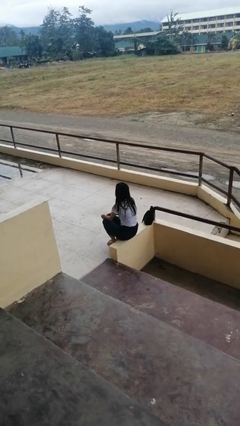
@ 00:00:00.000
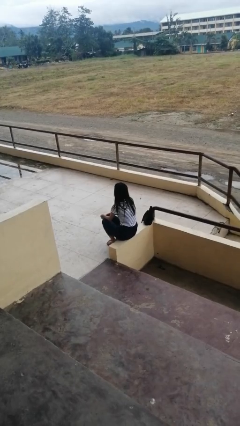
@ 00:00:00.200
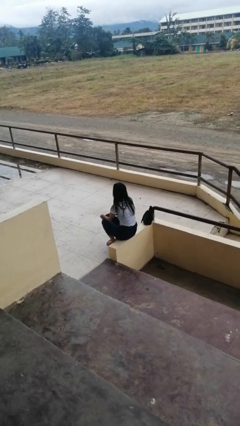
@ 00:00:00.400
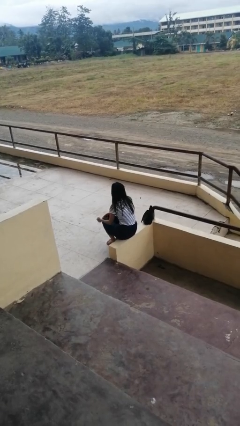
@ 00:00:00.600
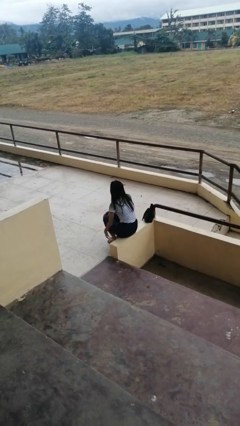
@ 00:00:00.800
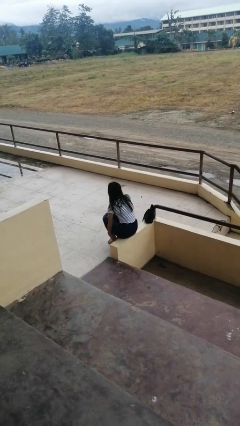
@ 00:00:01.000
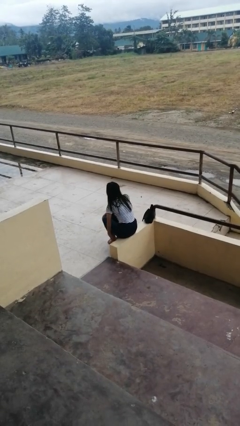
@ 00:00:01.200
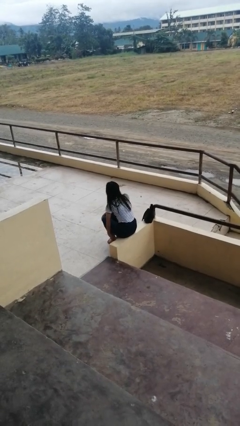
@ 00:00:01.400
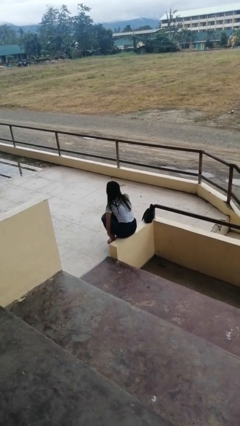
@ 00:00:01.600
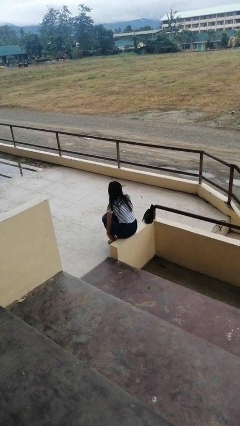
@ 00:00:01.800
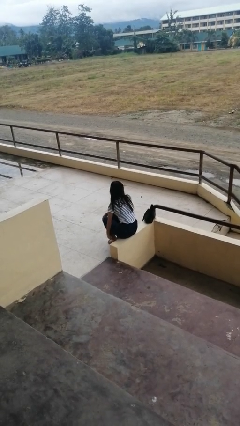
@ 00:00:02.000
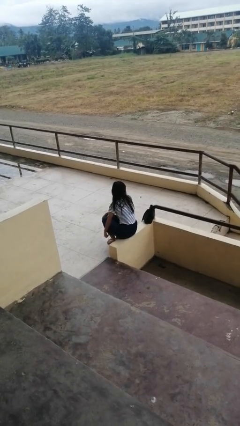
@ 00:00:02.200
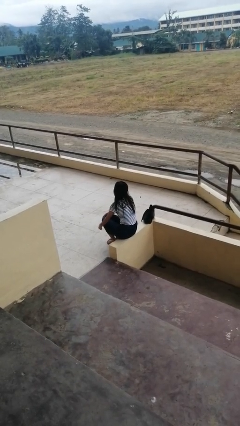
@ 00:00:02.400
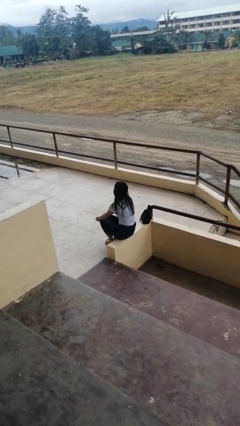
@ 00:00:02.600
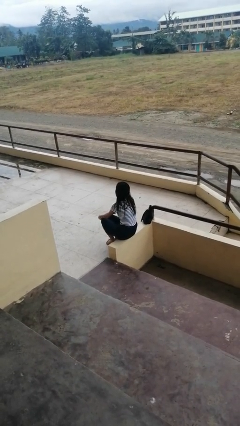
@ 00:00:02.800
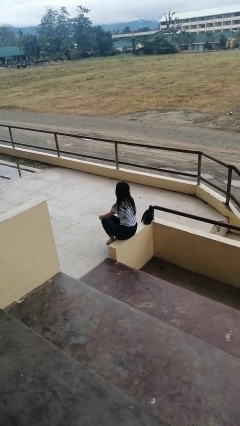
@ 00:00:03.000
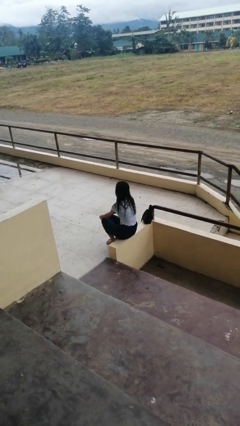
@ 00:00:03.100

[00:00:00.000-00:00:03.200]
person rubs foot

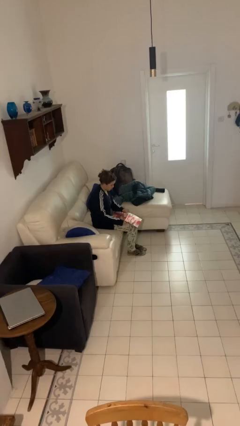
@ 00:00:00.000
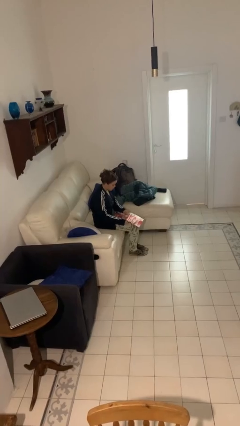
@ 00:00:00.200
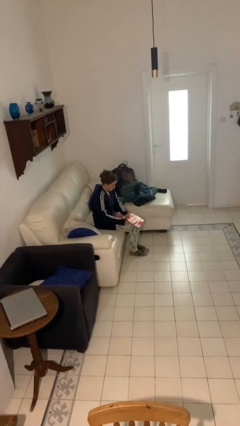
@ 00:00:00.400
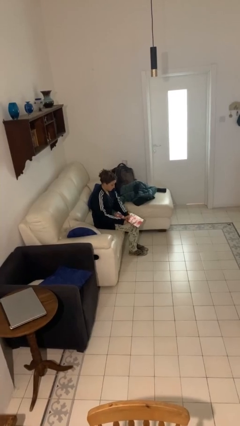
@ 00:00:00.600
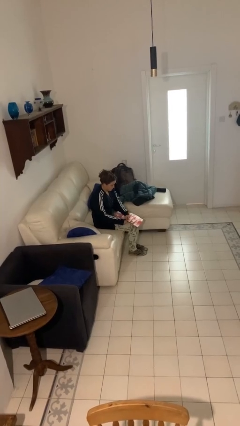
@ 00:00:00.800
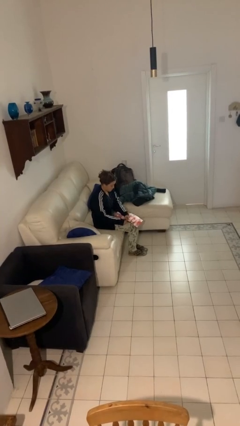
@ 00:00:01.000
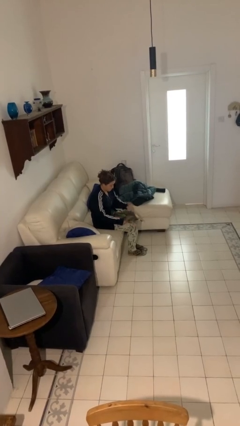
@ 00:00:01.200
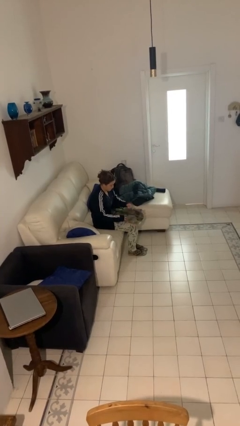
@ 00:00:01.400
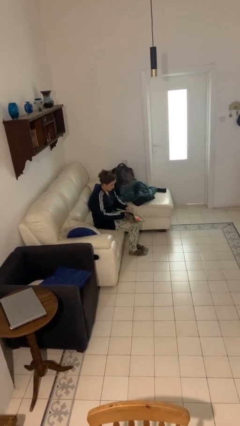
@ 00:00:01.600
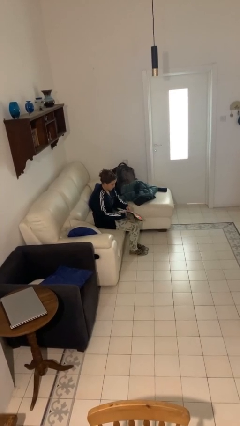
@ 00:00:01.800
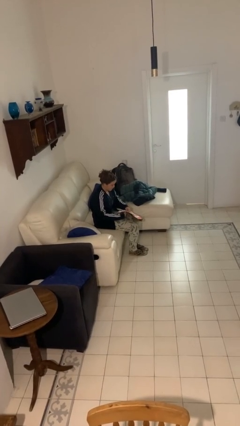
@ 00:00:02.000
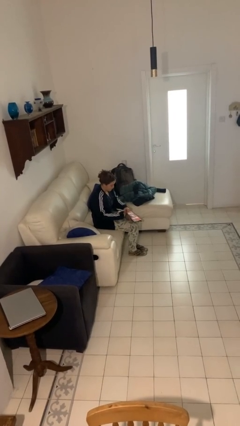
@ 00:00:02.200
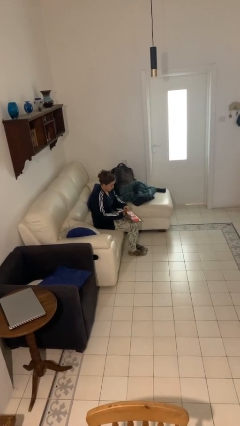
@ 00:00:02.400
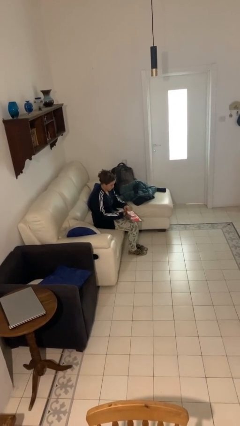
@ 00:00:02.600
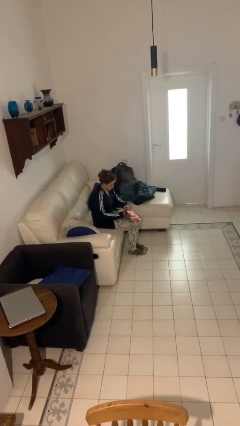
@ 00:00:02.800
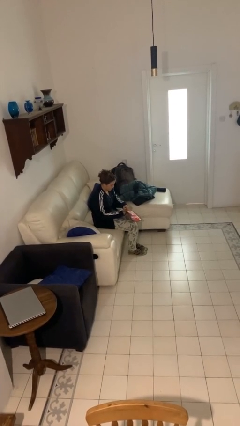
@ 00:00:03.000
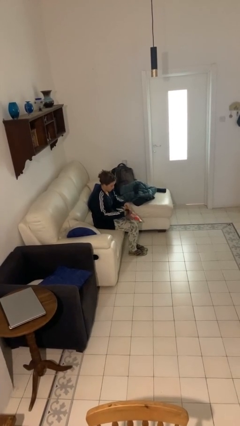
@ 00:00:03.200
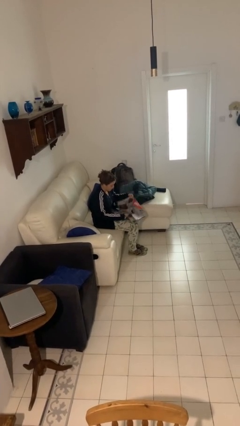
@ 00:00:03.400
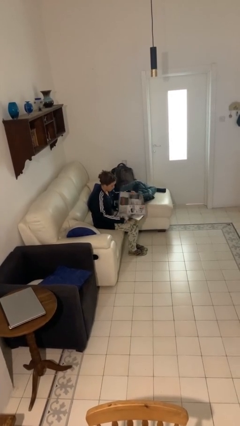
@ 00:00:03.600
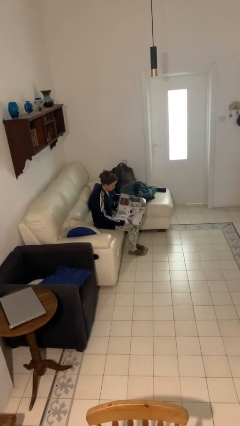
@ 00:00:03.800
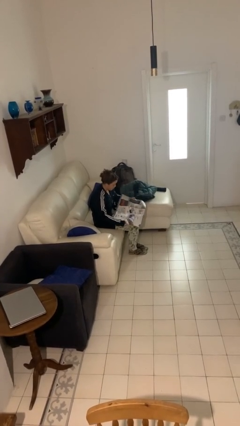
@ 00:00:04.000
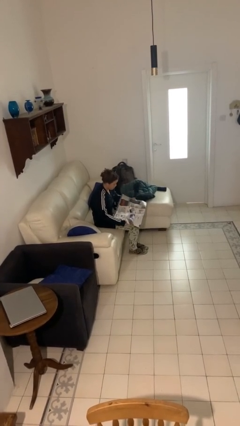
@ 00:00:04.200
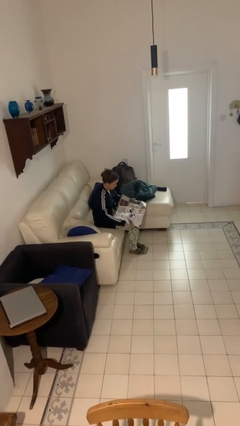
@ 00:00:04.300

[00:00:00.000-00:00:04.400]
person reads newspaper

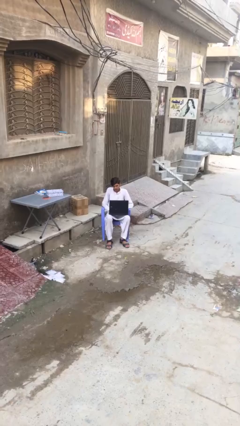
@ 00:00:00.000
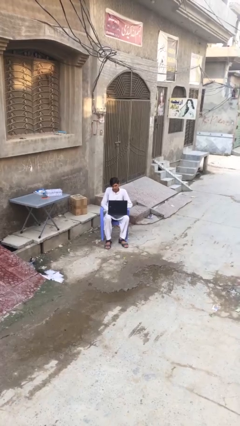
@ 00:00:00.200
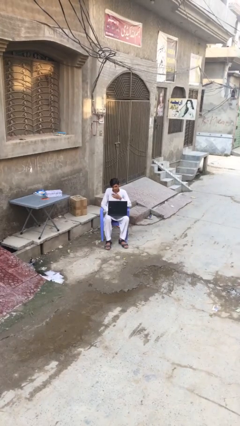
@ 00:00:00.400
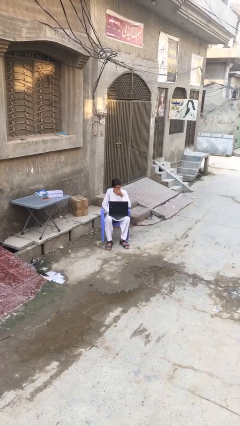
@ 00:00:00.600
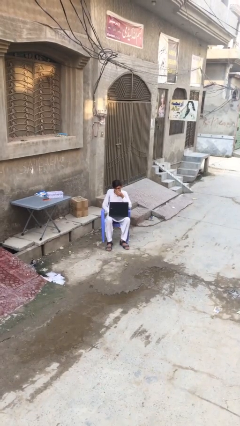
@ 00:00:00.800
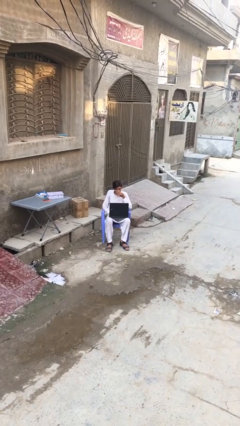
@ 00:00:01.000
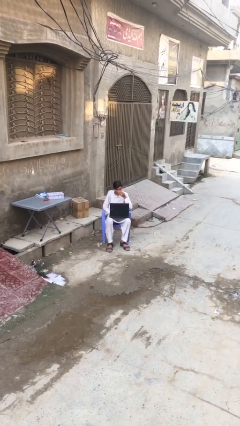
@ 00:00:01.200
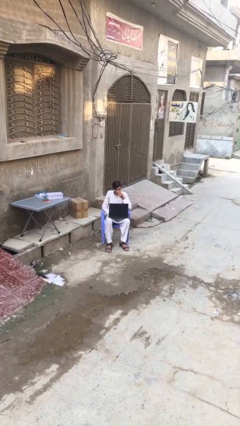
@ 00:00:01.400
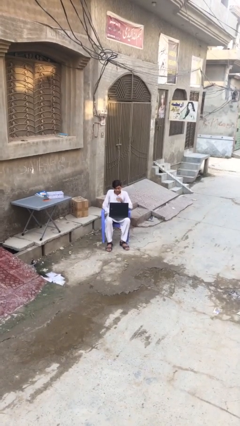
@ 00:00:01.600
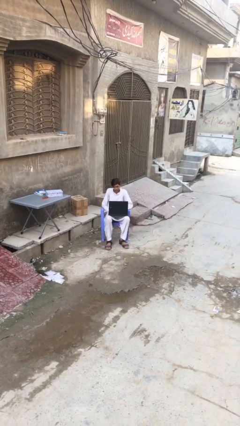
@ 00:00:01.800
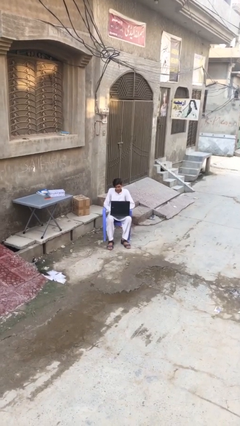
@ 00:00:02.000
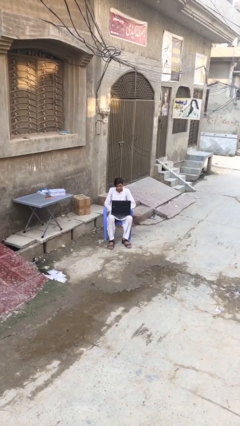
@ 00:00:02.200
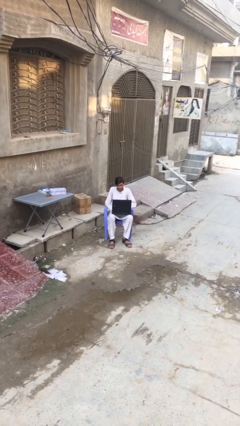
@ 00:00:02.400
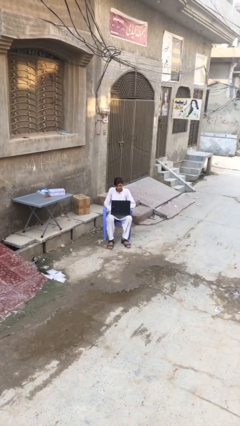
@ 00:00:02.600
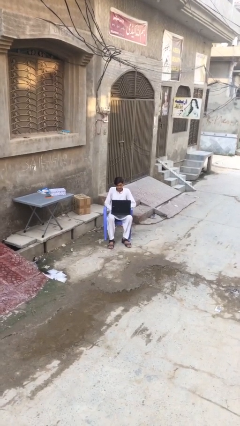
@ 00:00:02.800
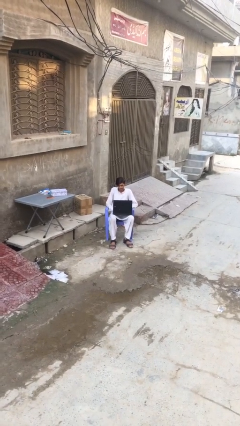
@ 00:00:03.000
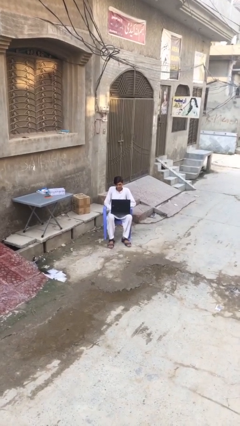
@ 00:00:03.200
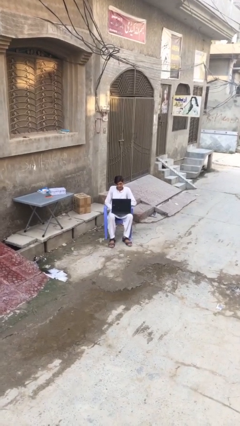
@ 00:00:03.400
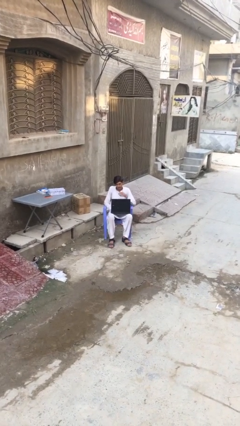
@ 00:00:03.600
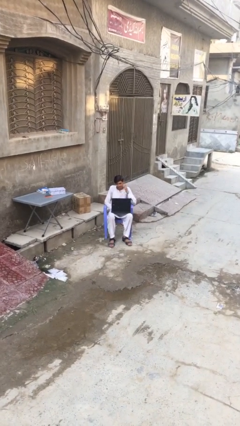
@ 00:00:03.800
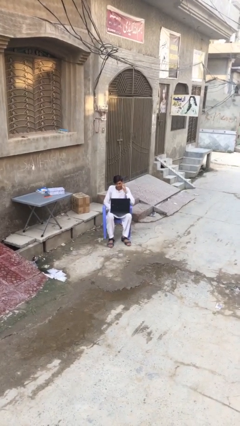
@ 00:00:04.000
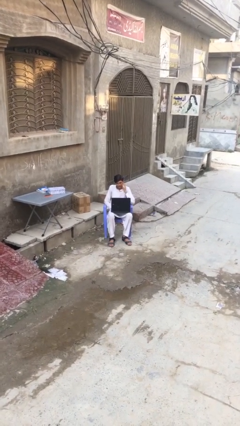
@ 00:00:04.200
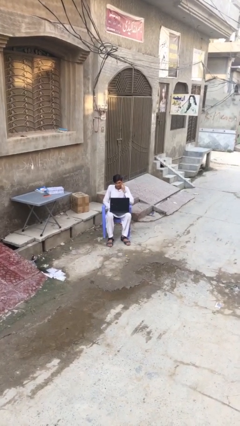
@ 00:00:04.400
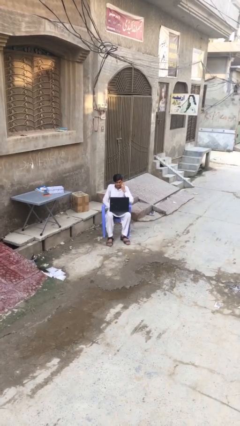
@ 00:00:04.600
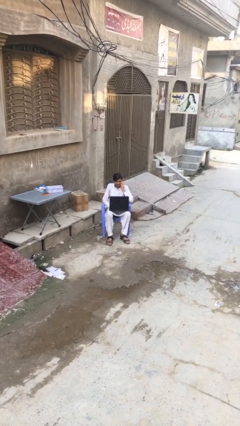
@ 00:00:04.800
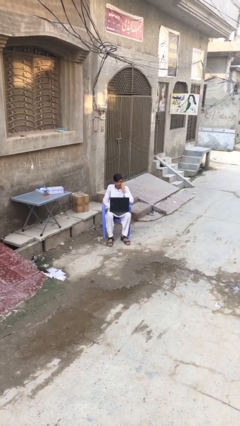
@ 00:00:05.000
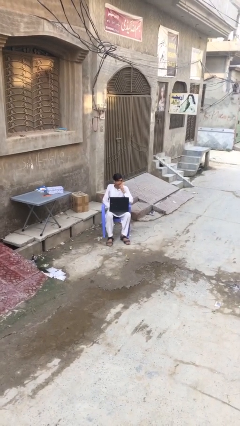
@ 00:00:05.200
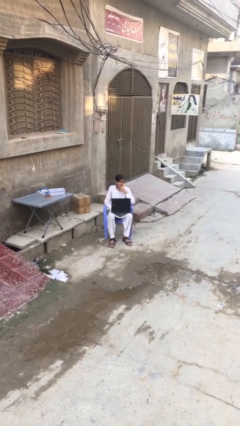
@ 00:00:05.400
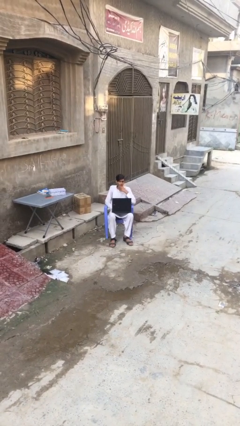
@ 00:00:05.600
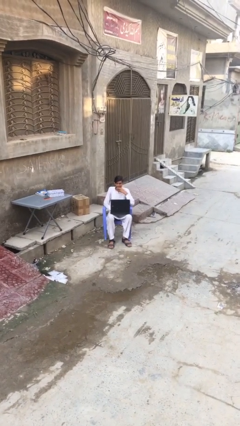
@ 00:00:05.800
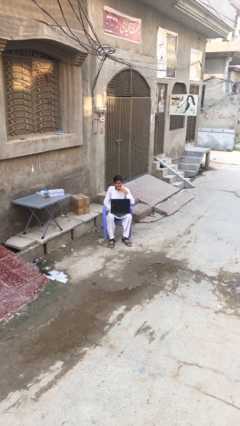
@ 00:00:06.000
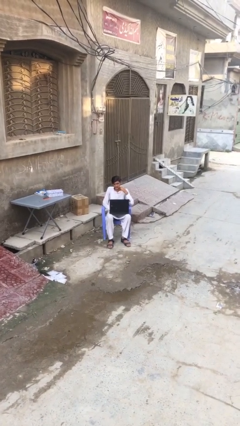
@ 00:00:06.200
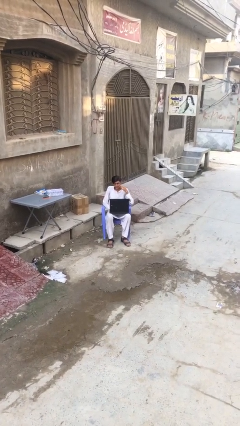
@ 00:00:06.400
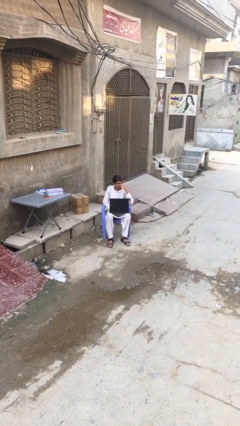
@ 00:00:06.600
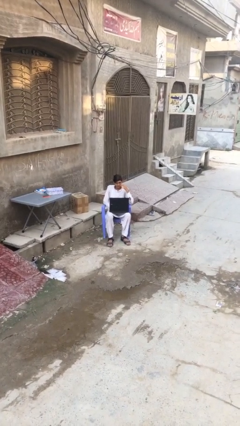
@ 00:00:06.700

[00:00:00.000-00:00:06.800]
person interacts with laptop

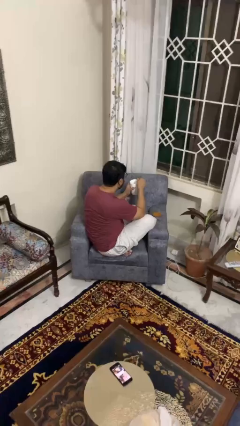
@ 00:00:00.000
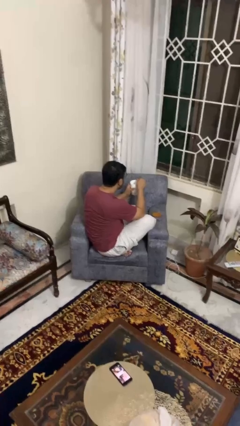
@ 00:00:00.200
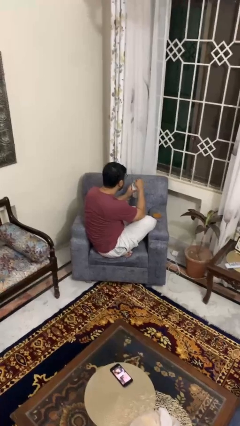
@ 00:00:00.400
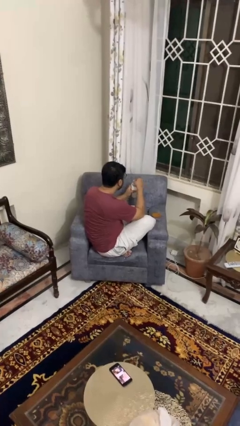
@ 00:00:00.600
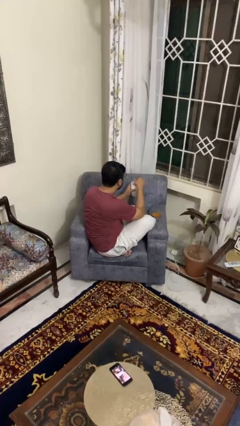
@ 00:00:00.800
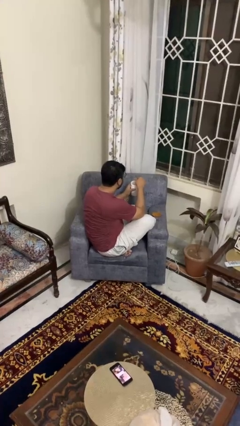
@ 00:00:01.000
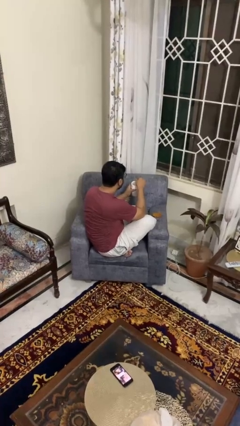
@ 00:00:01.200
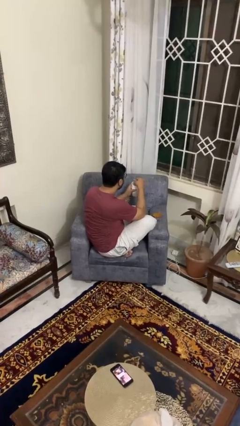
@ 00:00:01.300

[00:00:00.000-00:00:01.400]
person stirs mug

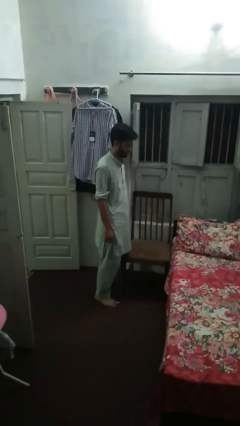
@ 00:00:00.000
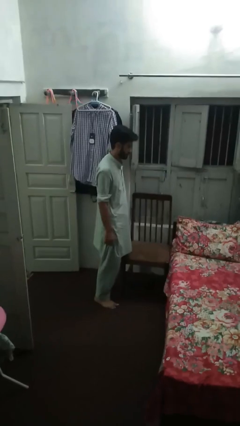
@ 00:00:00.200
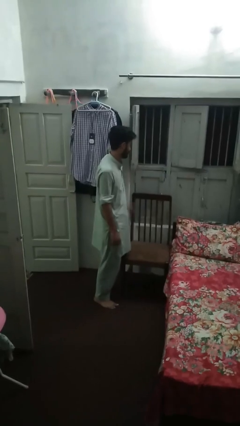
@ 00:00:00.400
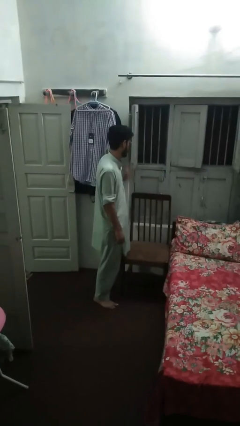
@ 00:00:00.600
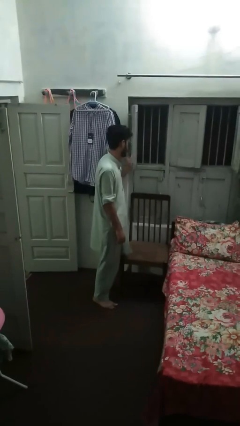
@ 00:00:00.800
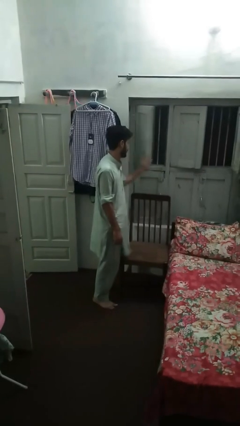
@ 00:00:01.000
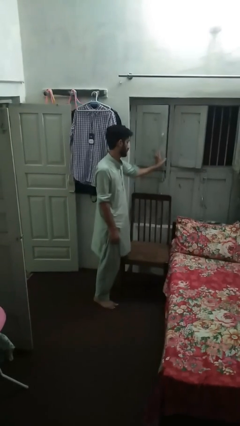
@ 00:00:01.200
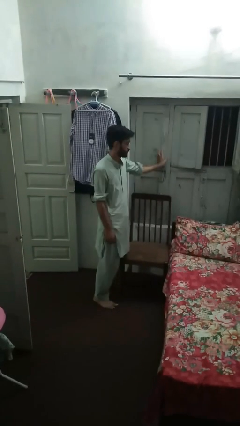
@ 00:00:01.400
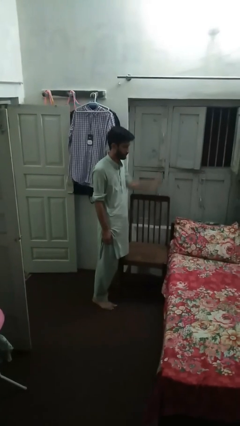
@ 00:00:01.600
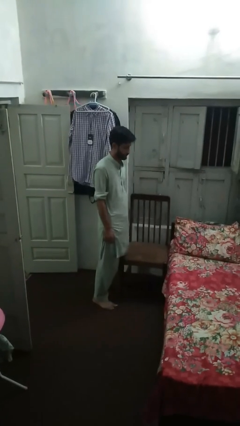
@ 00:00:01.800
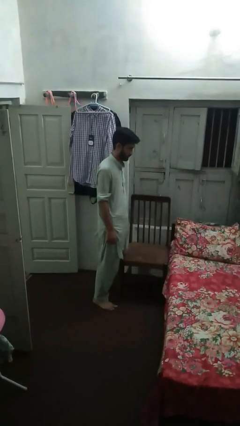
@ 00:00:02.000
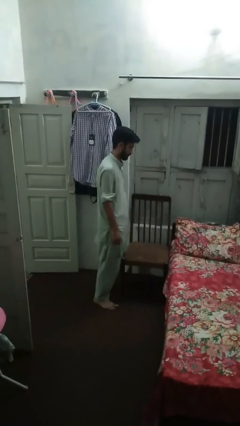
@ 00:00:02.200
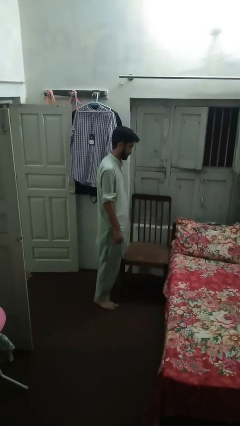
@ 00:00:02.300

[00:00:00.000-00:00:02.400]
person closes home window
